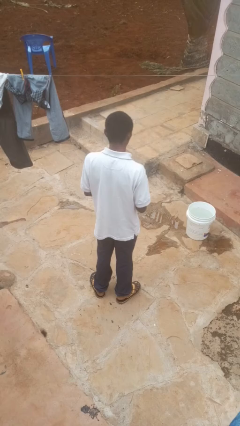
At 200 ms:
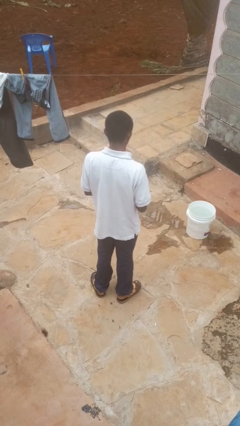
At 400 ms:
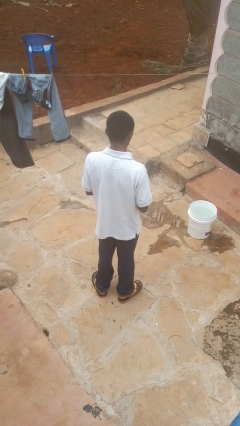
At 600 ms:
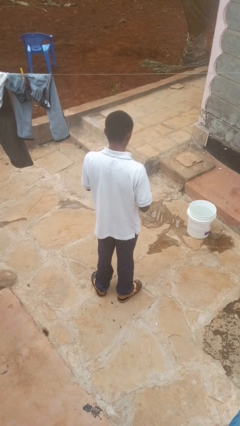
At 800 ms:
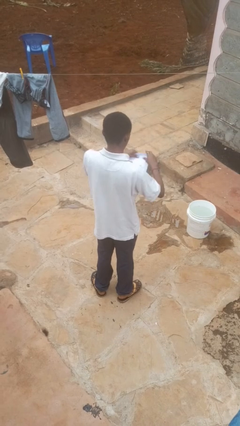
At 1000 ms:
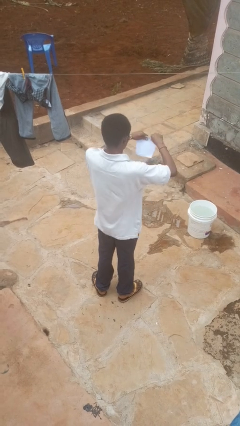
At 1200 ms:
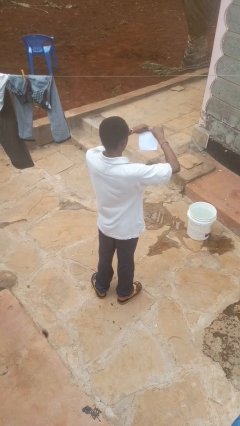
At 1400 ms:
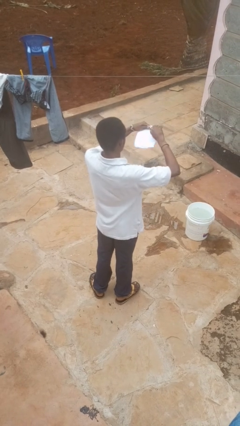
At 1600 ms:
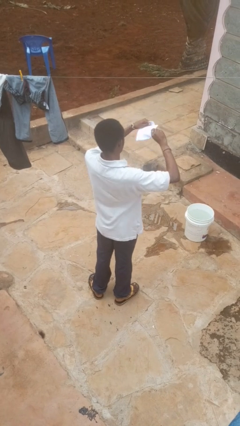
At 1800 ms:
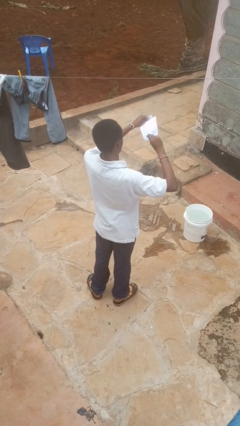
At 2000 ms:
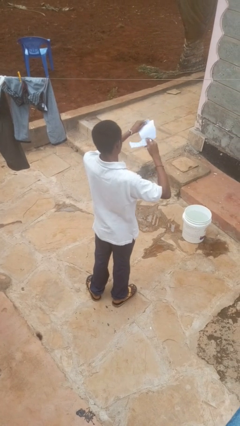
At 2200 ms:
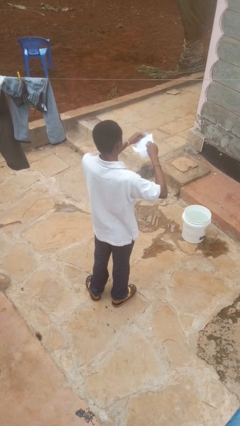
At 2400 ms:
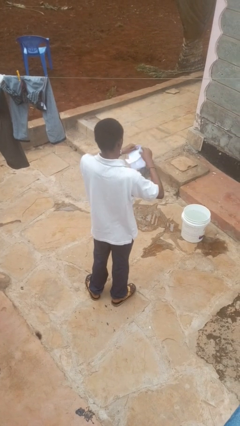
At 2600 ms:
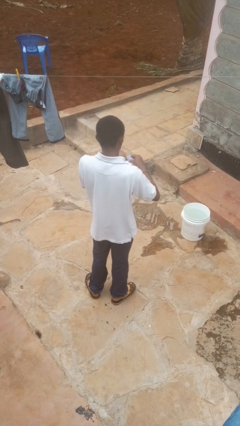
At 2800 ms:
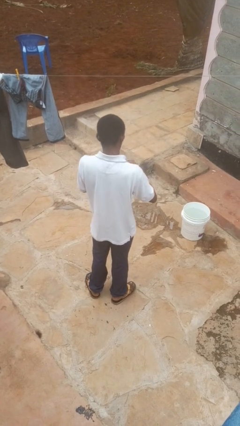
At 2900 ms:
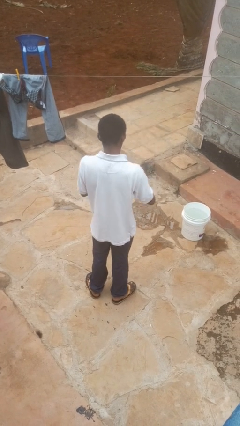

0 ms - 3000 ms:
person tears paper

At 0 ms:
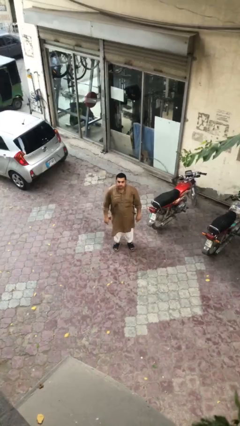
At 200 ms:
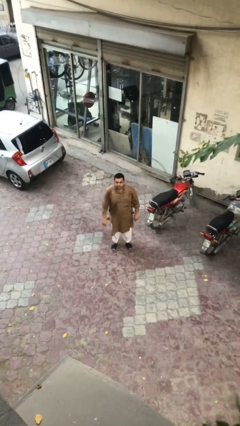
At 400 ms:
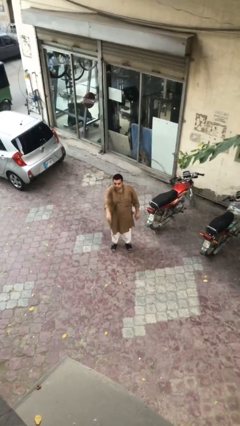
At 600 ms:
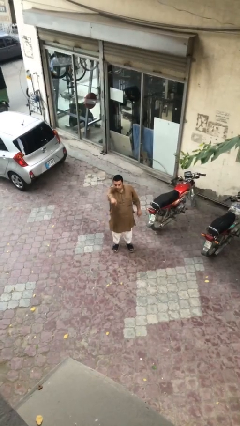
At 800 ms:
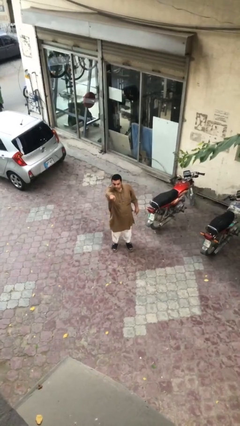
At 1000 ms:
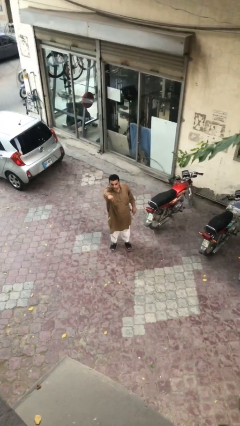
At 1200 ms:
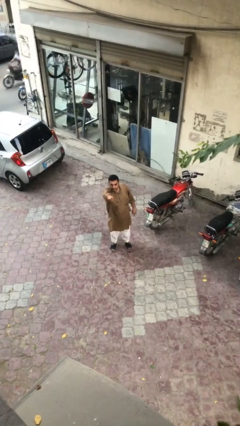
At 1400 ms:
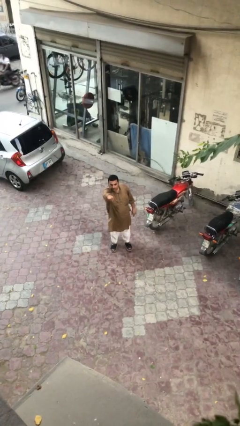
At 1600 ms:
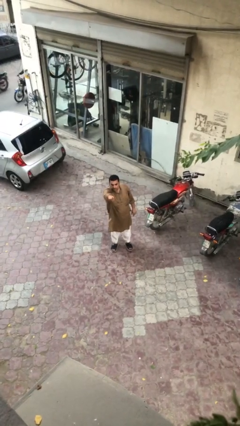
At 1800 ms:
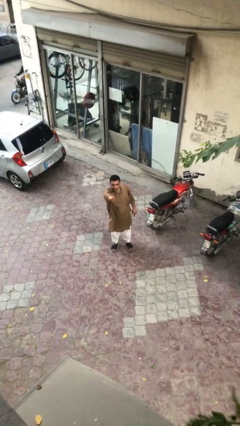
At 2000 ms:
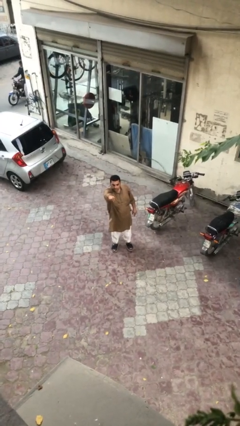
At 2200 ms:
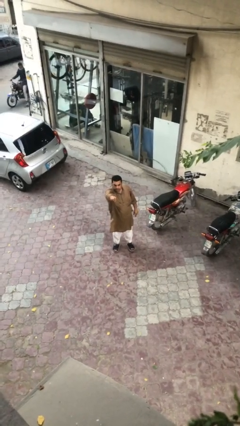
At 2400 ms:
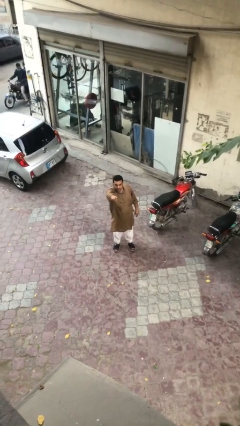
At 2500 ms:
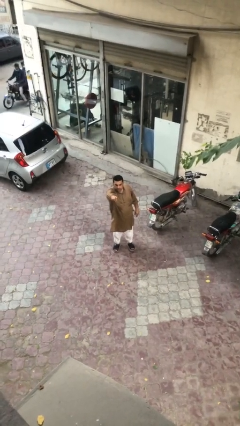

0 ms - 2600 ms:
person points at person

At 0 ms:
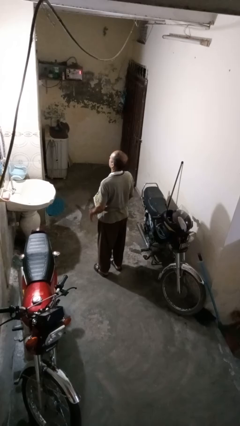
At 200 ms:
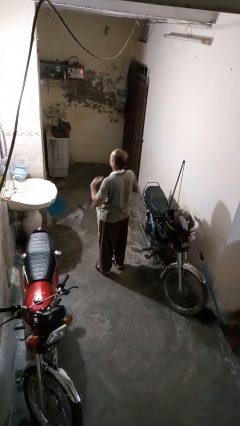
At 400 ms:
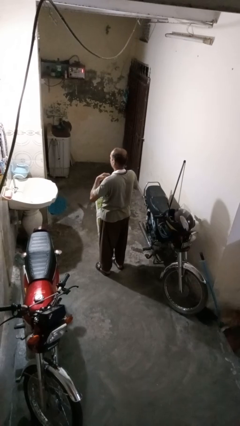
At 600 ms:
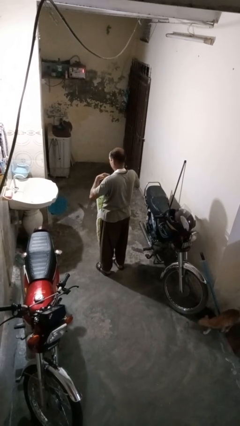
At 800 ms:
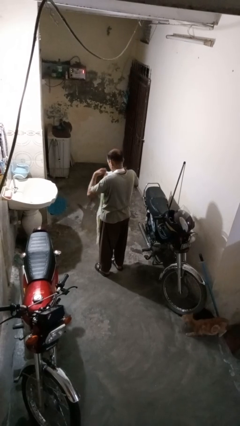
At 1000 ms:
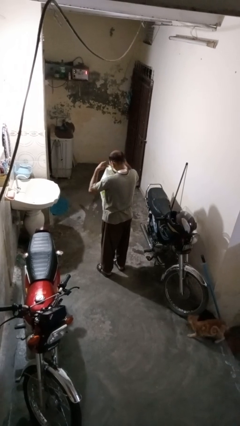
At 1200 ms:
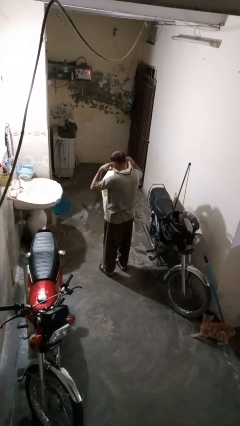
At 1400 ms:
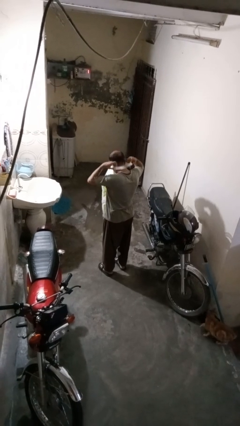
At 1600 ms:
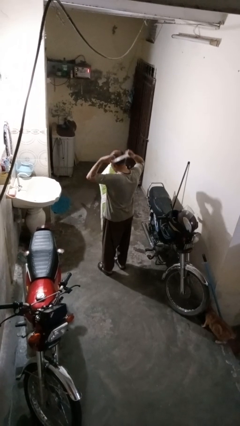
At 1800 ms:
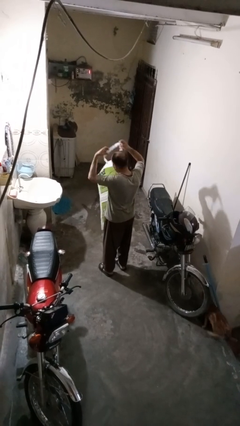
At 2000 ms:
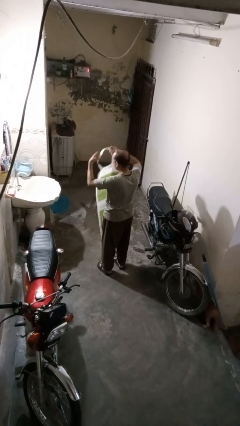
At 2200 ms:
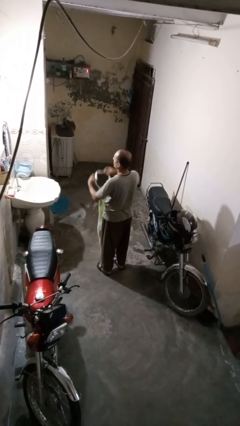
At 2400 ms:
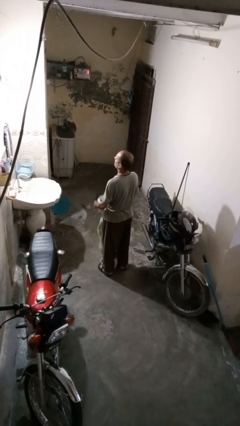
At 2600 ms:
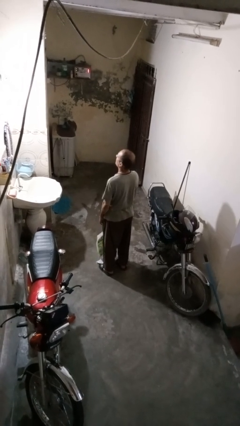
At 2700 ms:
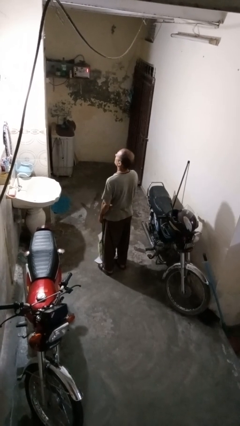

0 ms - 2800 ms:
person takes off apron

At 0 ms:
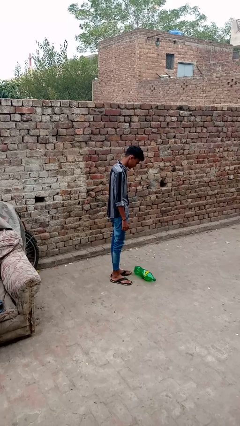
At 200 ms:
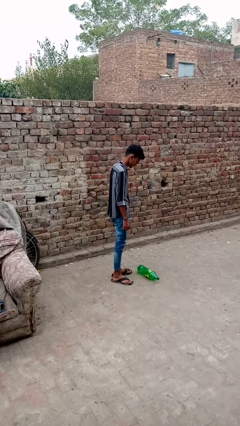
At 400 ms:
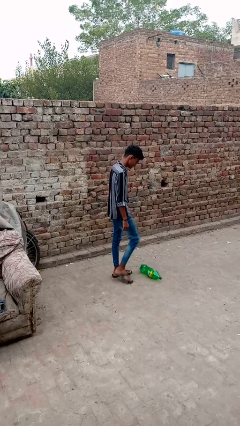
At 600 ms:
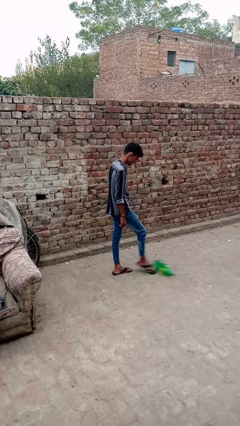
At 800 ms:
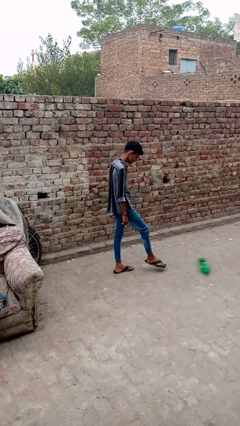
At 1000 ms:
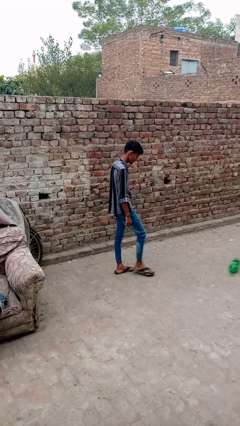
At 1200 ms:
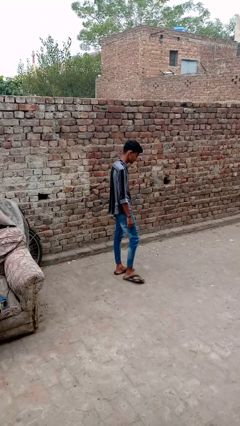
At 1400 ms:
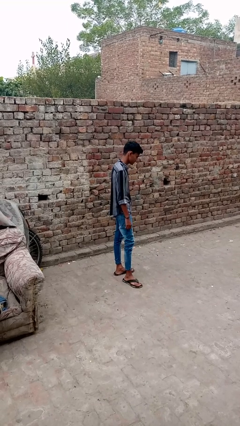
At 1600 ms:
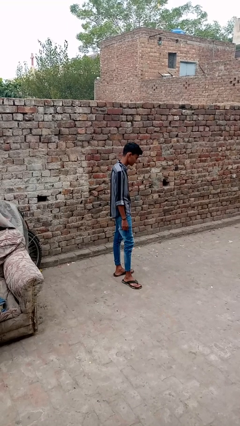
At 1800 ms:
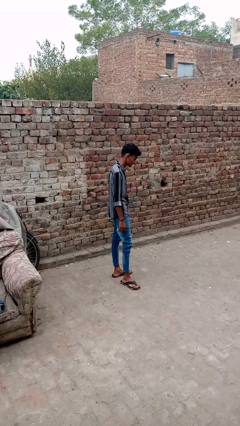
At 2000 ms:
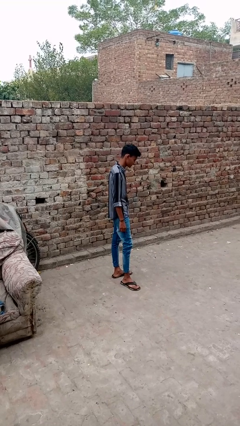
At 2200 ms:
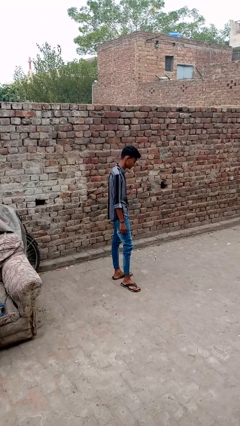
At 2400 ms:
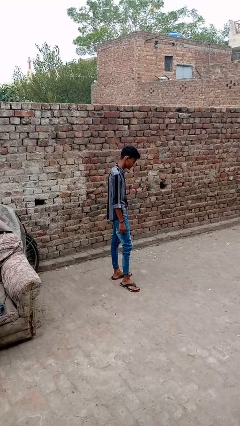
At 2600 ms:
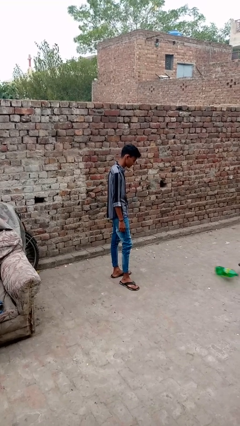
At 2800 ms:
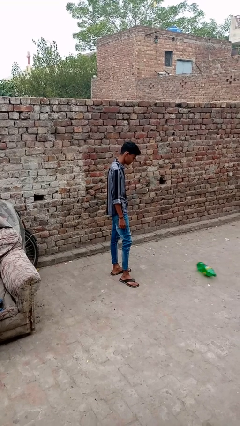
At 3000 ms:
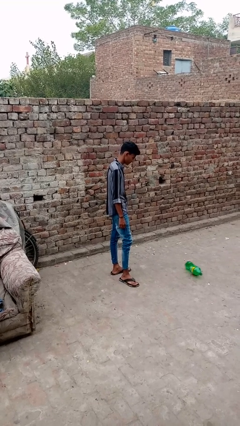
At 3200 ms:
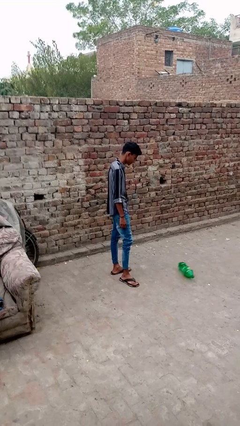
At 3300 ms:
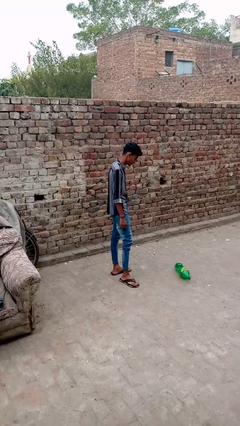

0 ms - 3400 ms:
person kicks object to person

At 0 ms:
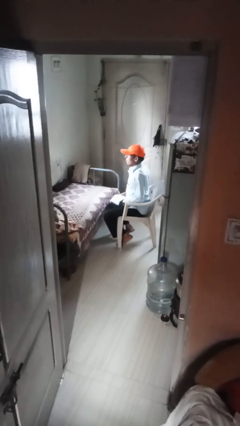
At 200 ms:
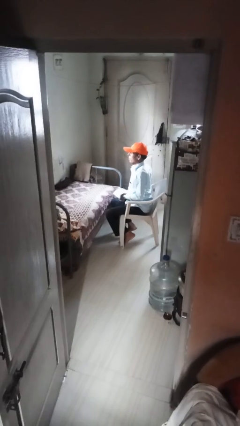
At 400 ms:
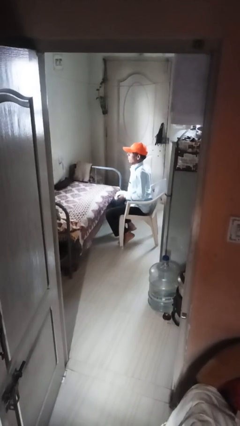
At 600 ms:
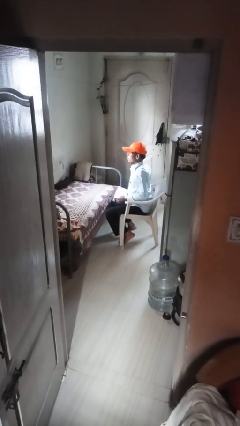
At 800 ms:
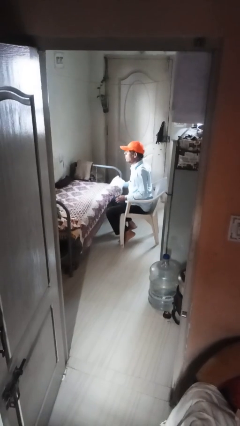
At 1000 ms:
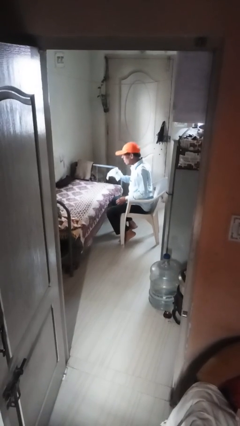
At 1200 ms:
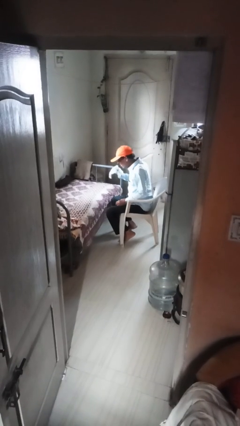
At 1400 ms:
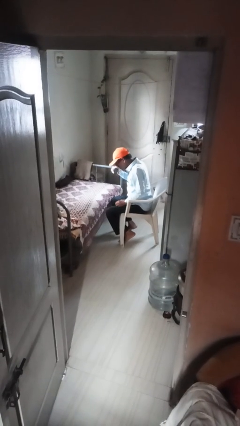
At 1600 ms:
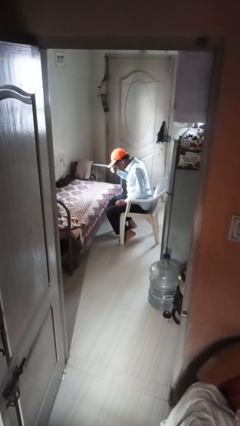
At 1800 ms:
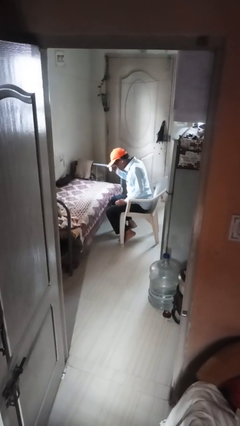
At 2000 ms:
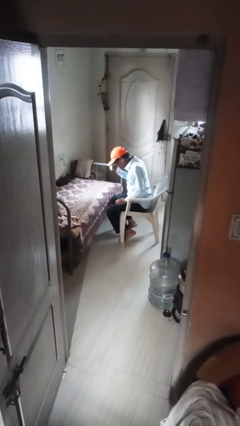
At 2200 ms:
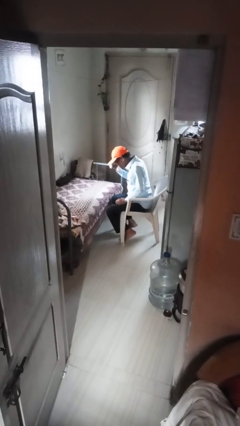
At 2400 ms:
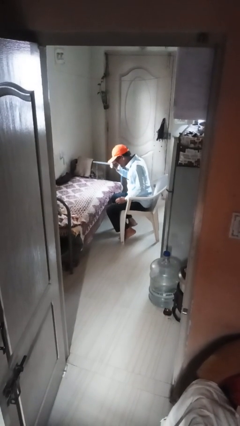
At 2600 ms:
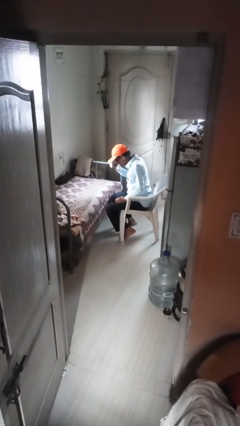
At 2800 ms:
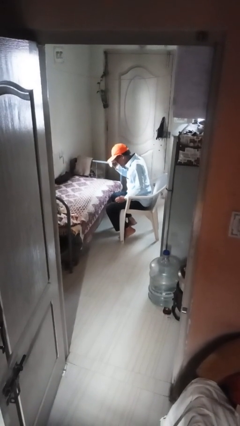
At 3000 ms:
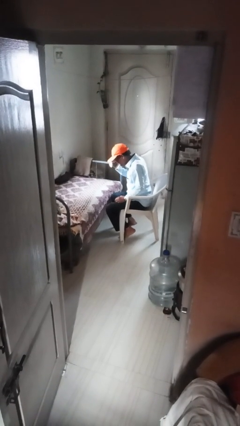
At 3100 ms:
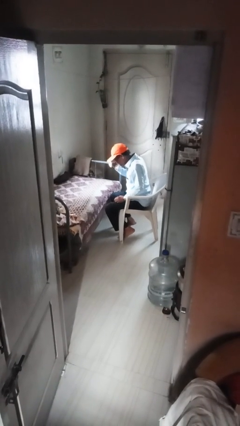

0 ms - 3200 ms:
person blows nose

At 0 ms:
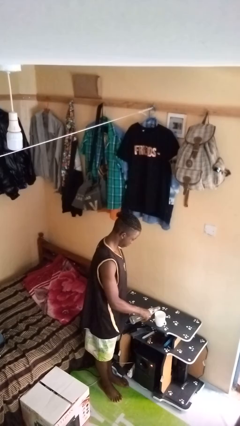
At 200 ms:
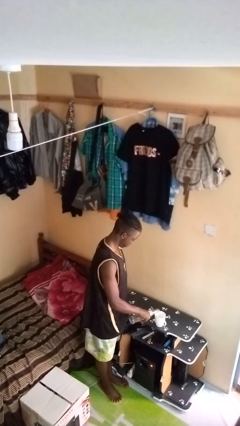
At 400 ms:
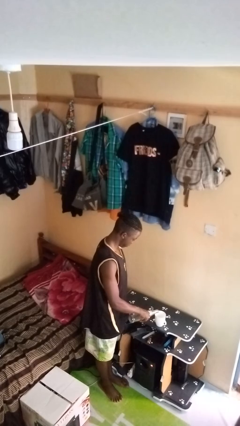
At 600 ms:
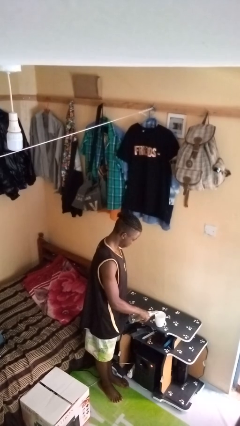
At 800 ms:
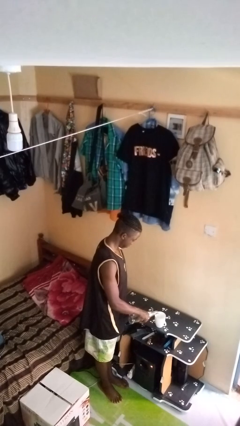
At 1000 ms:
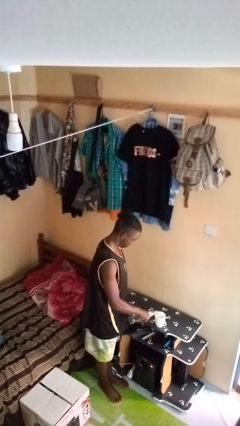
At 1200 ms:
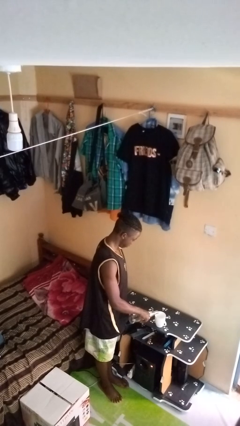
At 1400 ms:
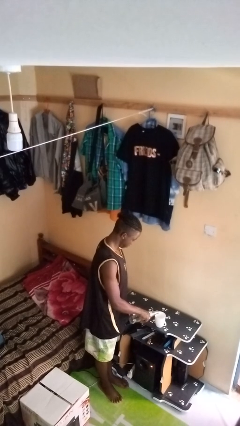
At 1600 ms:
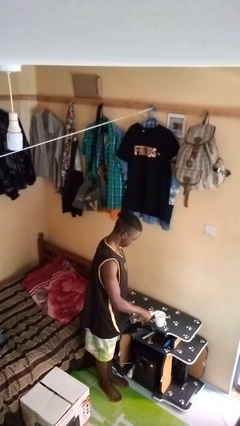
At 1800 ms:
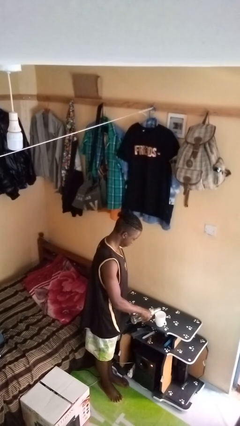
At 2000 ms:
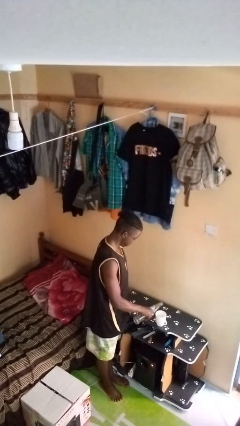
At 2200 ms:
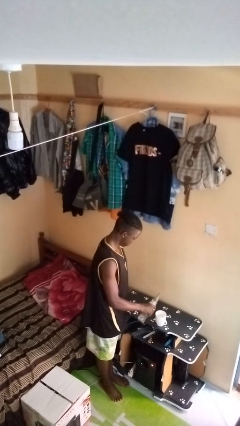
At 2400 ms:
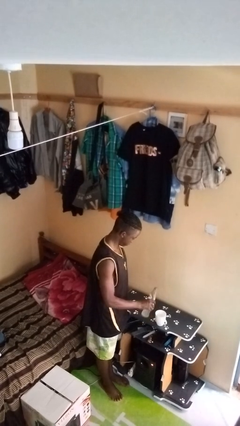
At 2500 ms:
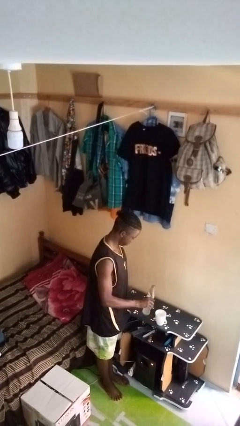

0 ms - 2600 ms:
person pours liquid into cup
